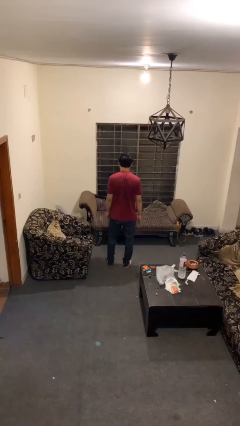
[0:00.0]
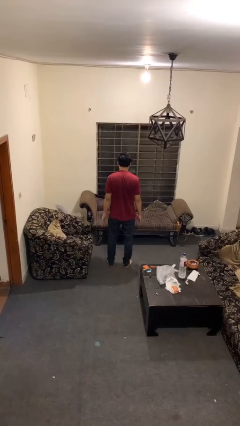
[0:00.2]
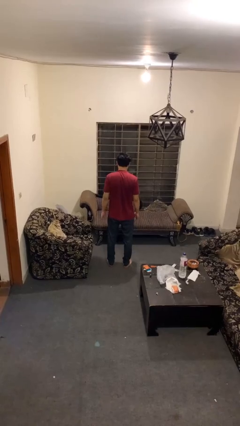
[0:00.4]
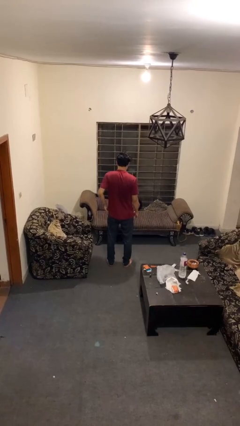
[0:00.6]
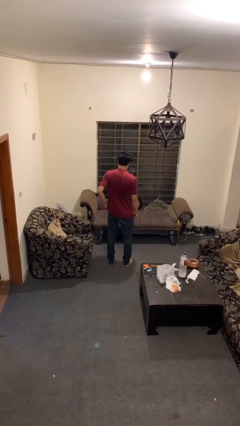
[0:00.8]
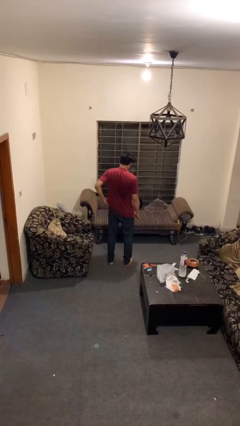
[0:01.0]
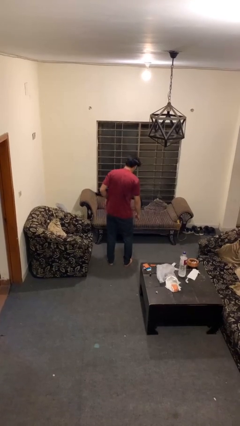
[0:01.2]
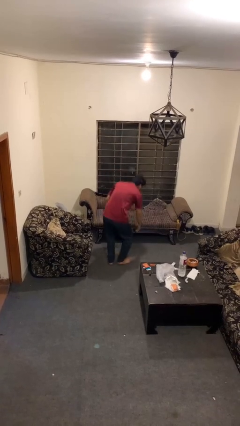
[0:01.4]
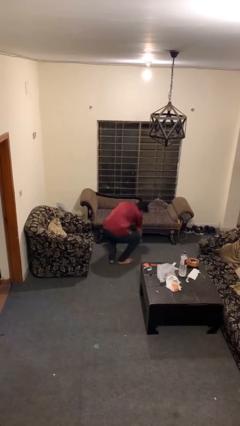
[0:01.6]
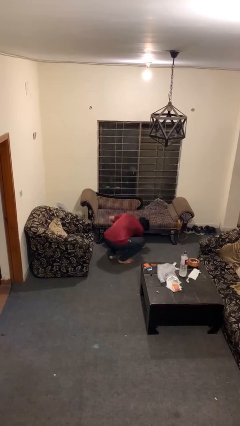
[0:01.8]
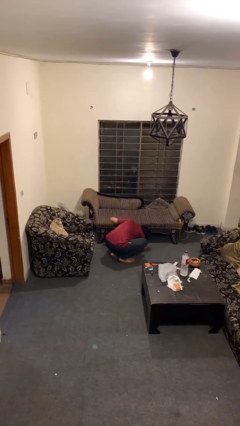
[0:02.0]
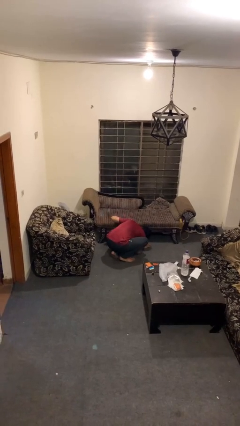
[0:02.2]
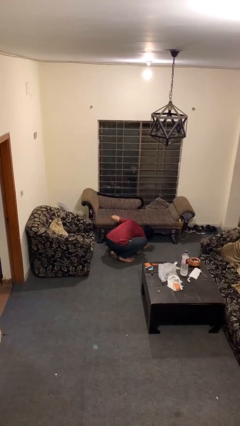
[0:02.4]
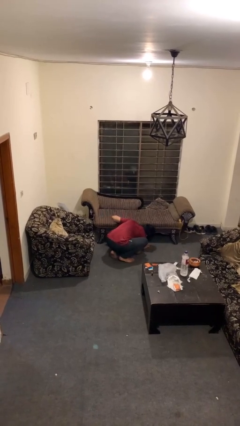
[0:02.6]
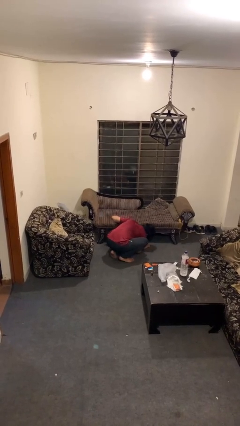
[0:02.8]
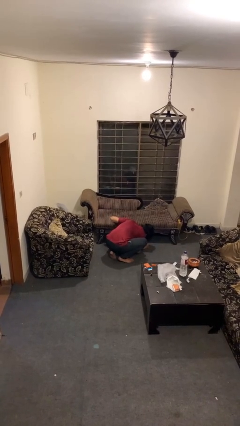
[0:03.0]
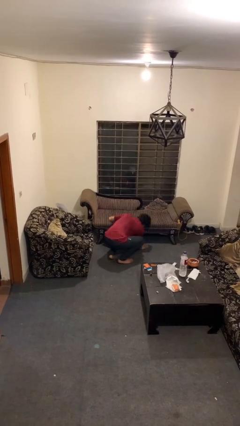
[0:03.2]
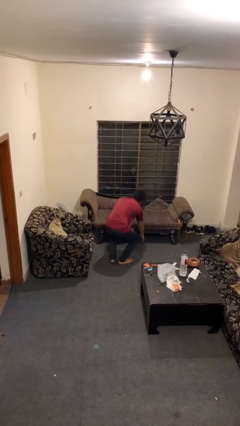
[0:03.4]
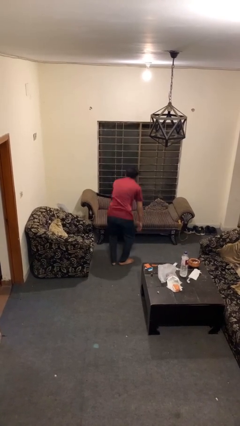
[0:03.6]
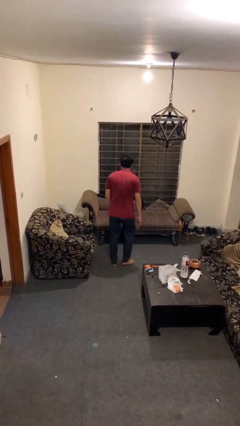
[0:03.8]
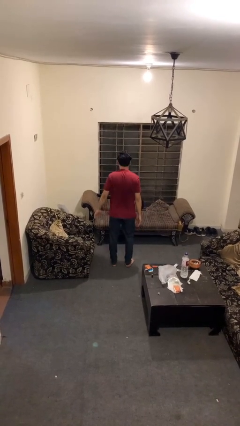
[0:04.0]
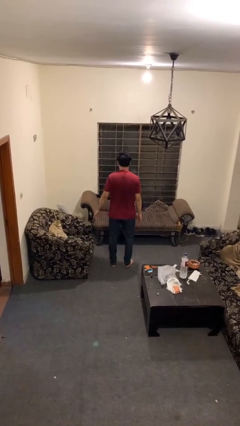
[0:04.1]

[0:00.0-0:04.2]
person searches under couch

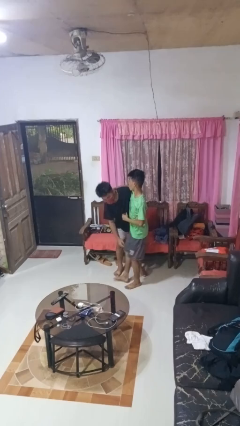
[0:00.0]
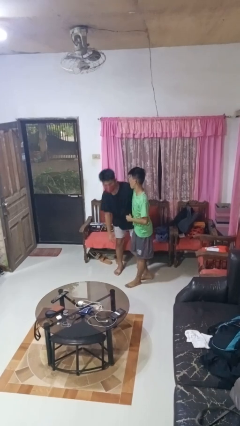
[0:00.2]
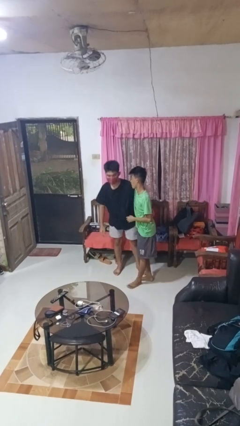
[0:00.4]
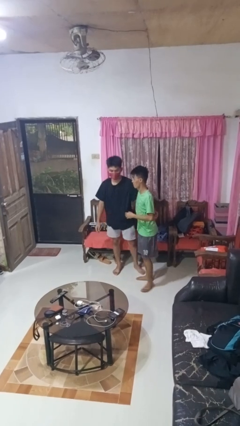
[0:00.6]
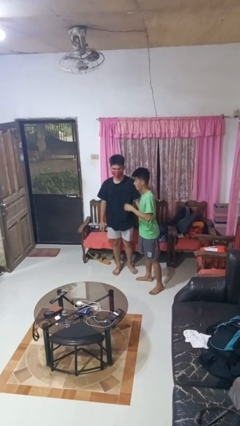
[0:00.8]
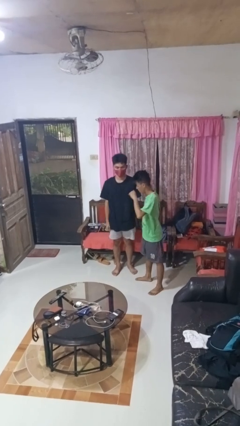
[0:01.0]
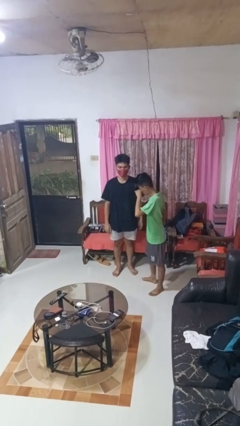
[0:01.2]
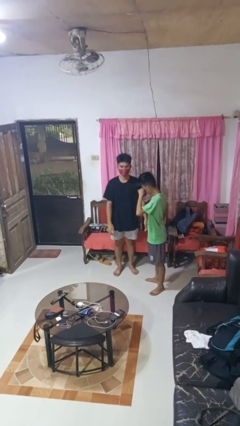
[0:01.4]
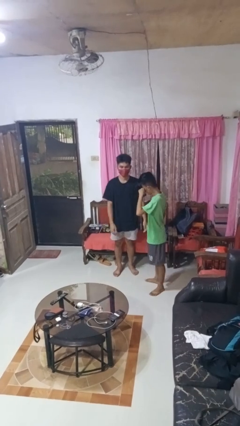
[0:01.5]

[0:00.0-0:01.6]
person puts down person

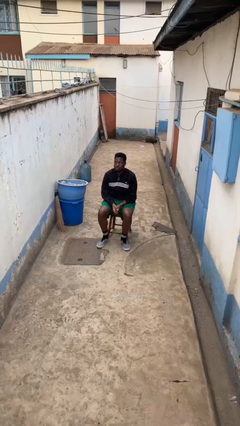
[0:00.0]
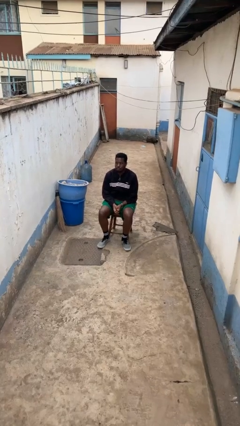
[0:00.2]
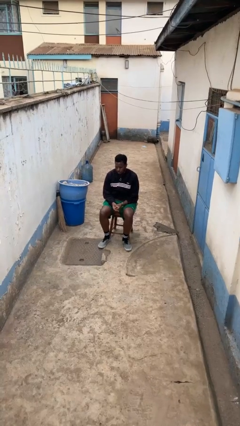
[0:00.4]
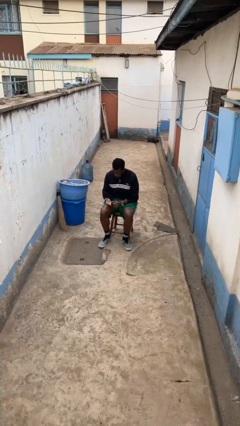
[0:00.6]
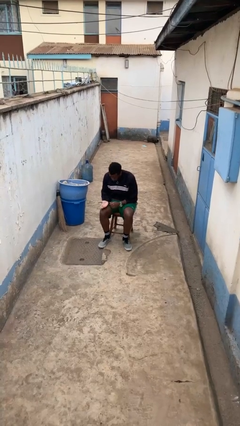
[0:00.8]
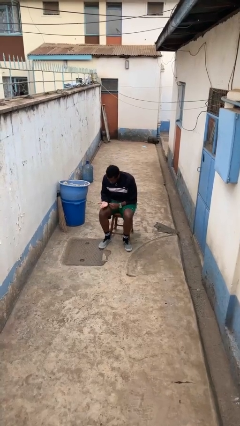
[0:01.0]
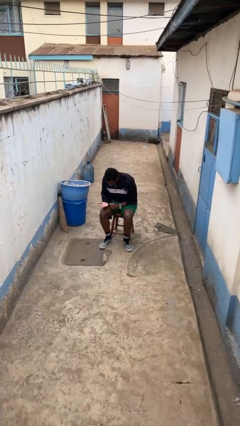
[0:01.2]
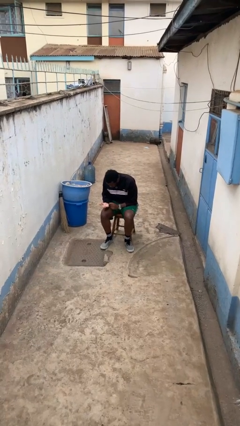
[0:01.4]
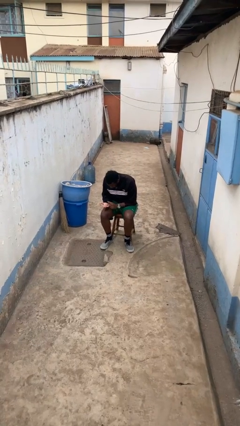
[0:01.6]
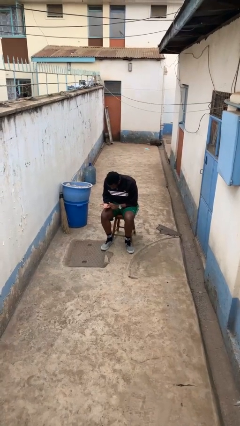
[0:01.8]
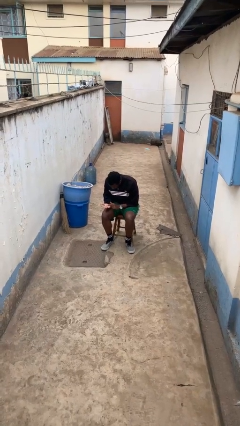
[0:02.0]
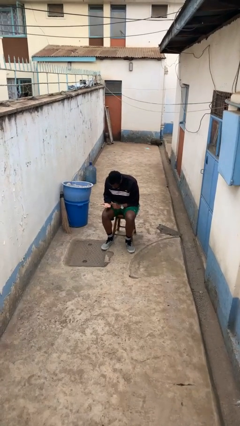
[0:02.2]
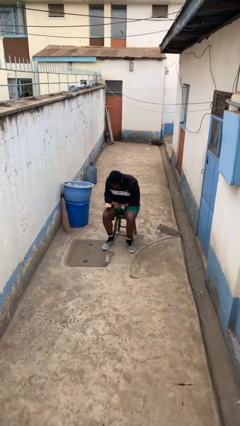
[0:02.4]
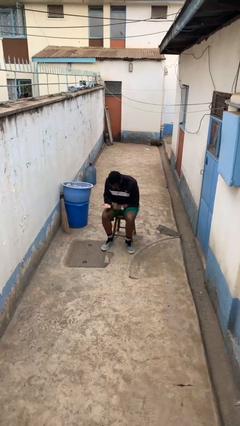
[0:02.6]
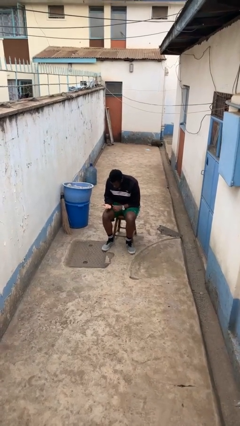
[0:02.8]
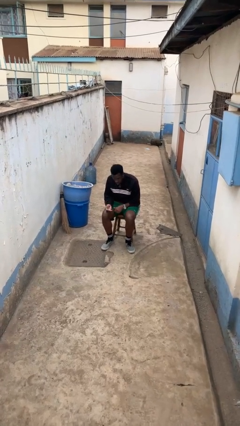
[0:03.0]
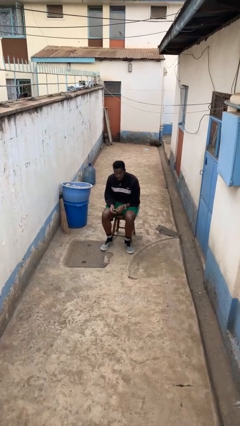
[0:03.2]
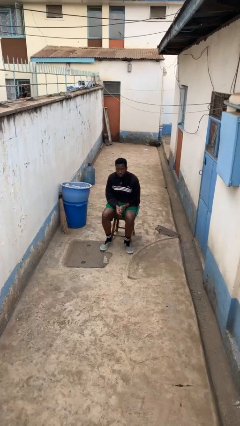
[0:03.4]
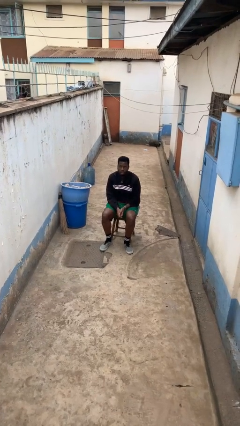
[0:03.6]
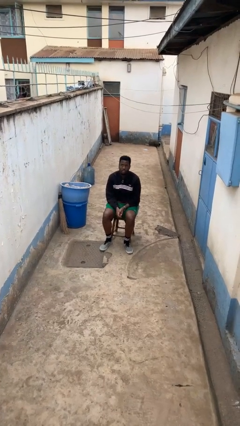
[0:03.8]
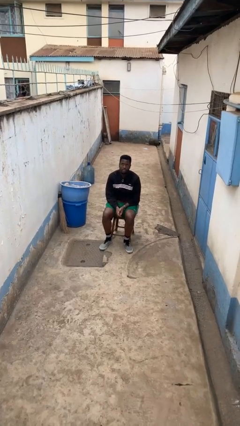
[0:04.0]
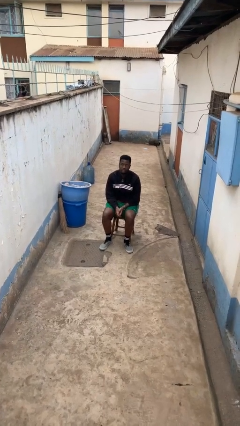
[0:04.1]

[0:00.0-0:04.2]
person looks at hands in lap

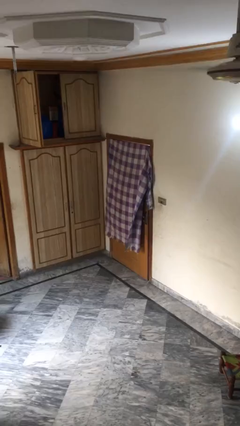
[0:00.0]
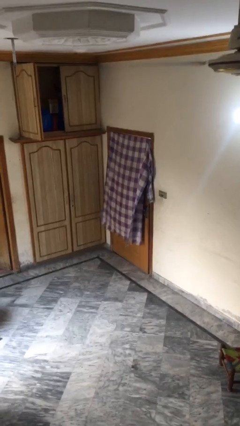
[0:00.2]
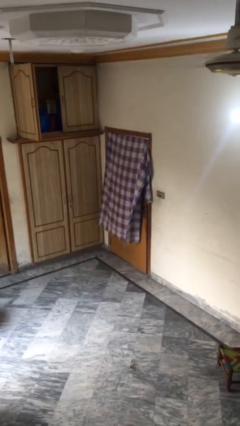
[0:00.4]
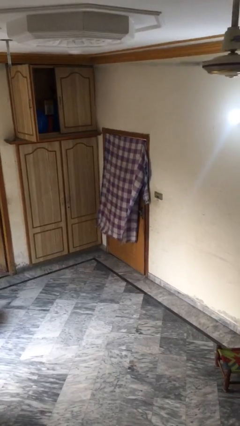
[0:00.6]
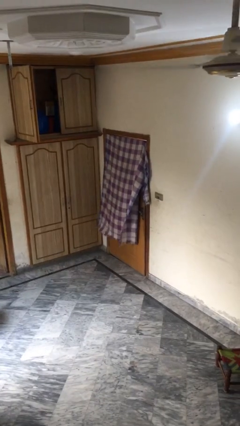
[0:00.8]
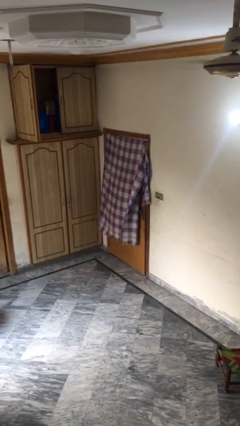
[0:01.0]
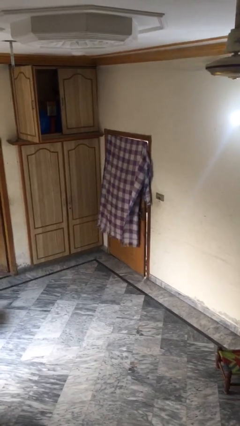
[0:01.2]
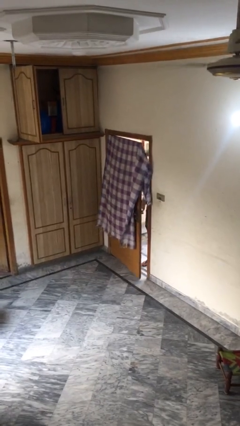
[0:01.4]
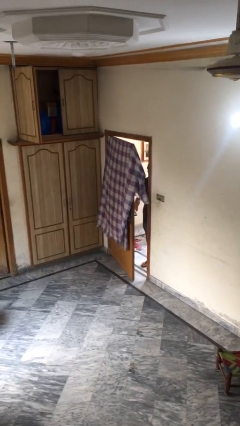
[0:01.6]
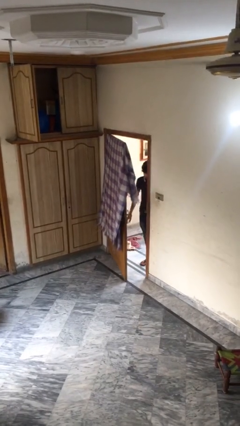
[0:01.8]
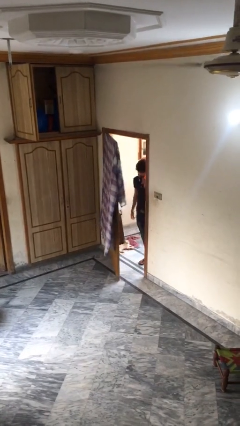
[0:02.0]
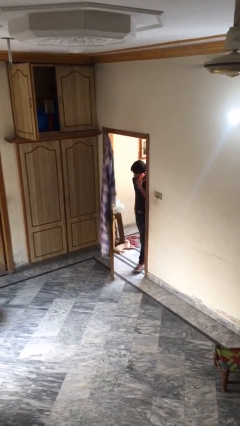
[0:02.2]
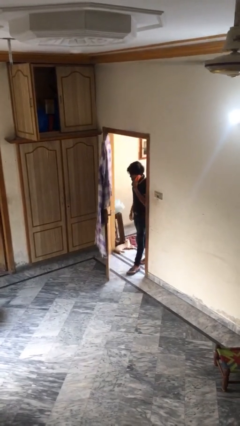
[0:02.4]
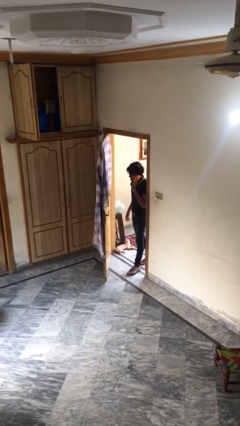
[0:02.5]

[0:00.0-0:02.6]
person opens facility door

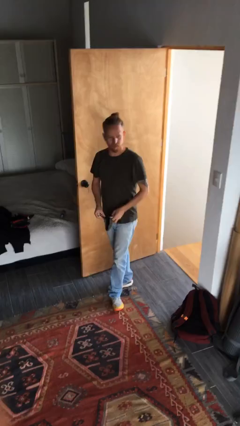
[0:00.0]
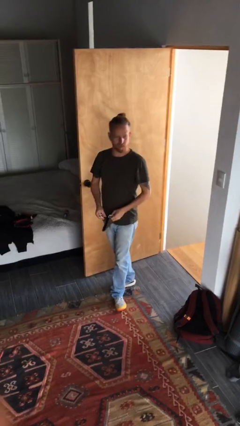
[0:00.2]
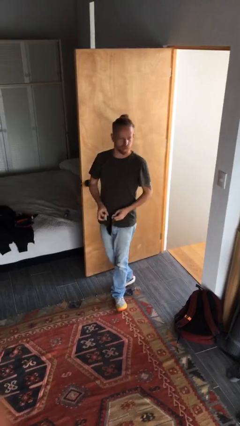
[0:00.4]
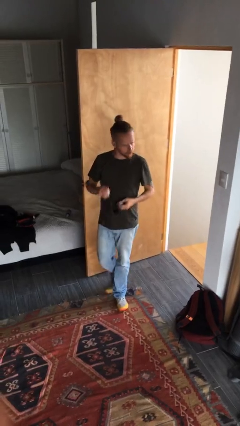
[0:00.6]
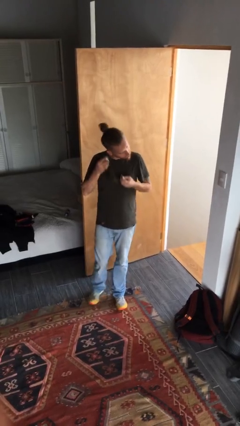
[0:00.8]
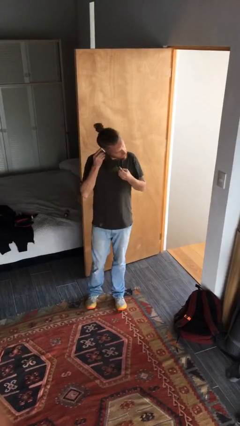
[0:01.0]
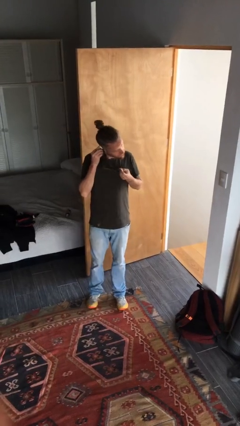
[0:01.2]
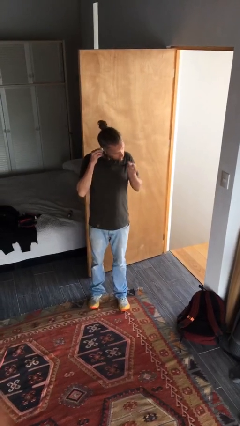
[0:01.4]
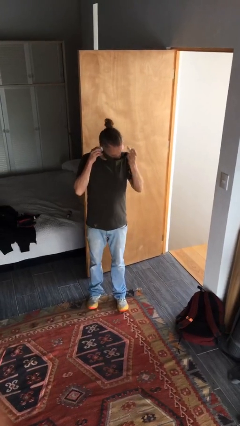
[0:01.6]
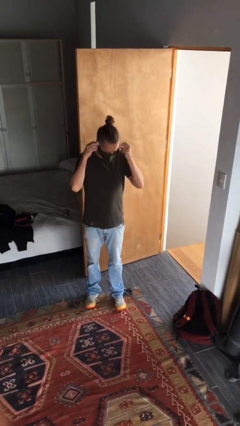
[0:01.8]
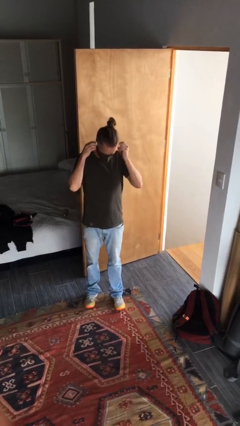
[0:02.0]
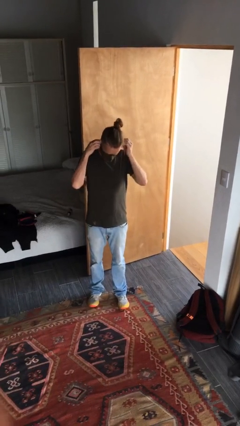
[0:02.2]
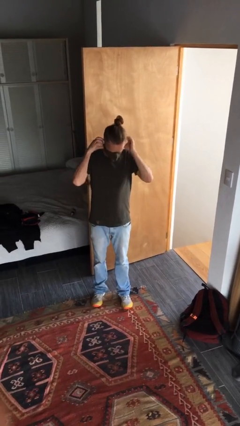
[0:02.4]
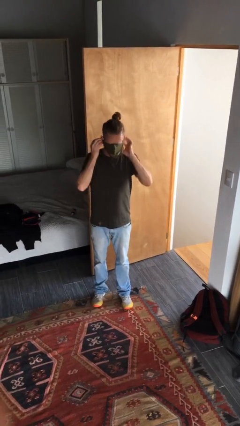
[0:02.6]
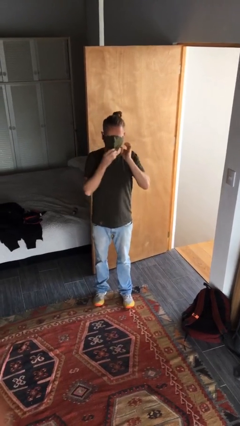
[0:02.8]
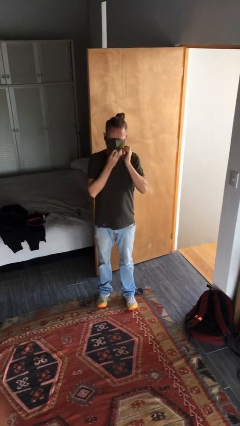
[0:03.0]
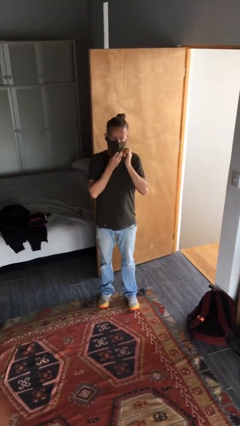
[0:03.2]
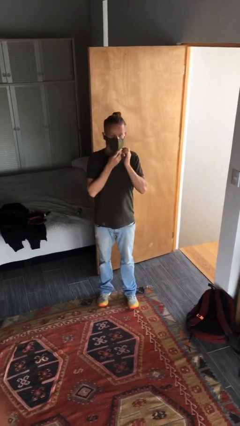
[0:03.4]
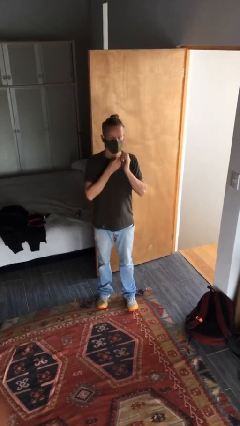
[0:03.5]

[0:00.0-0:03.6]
person puts on facemask

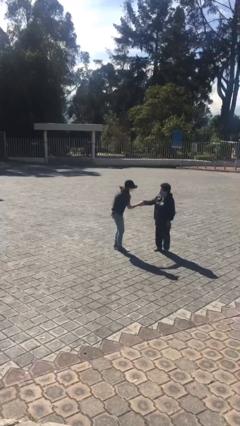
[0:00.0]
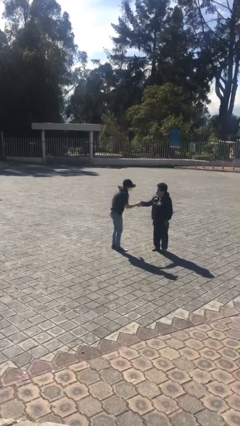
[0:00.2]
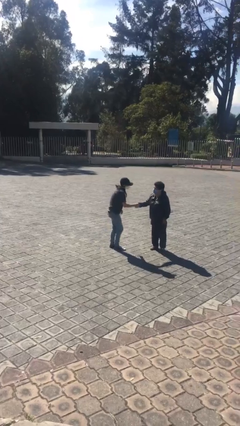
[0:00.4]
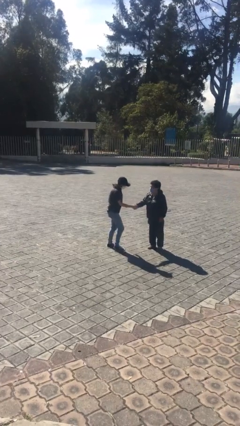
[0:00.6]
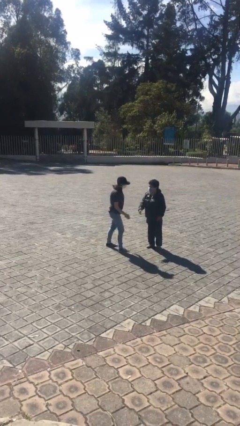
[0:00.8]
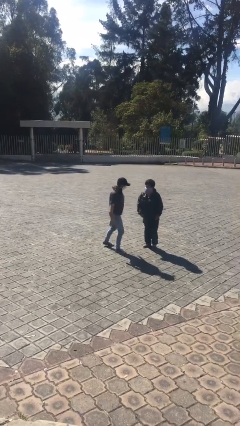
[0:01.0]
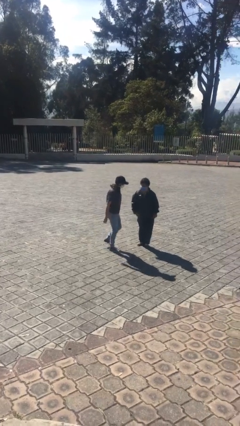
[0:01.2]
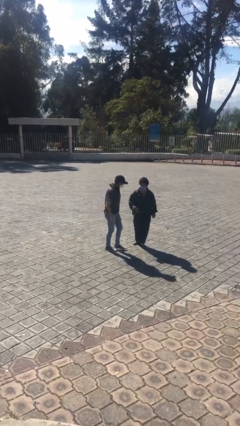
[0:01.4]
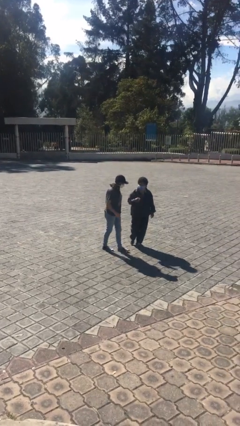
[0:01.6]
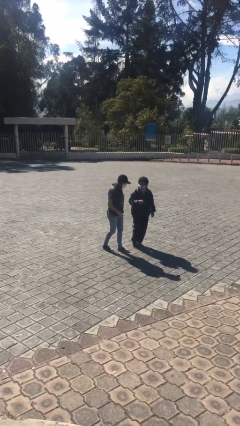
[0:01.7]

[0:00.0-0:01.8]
person shakes hand
